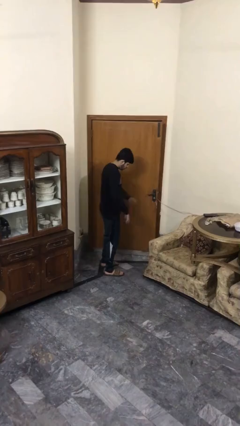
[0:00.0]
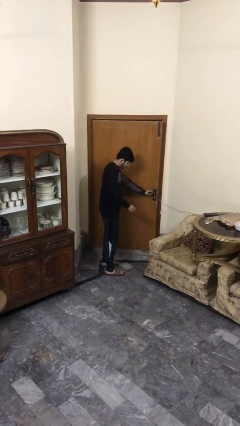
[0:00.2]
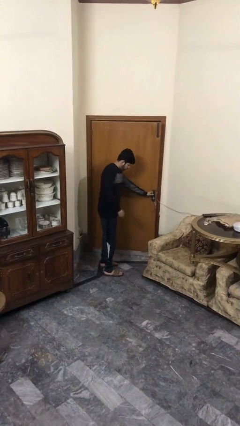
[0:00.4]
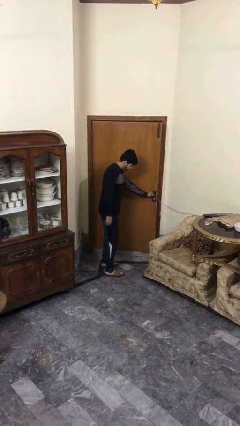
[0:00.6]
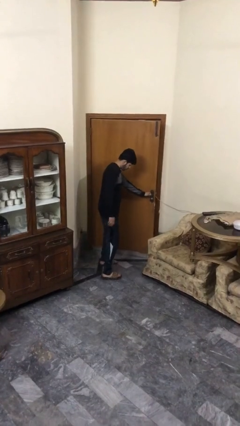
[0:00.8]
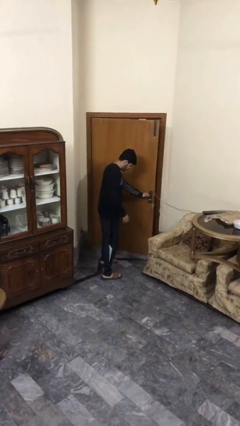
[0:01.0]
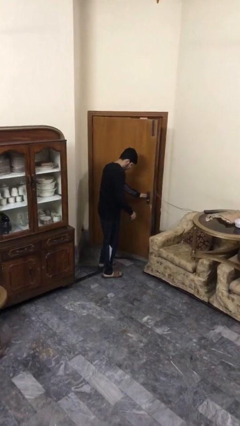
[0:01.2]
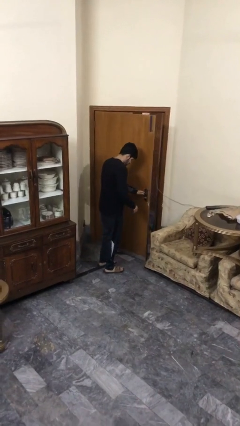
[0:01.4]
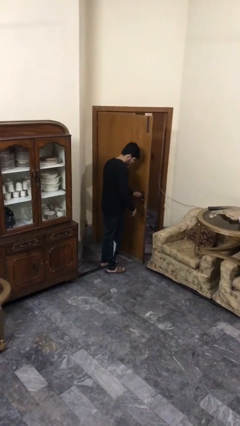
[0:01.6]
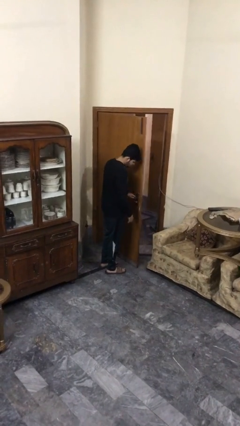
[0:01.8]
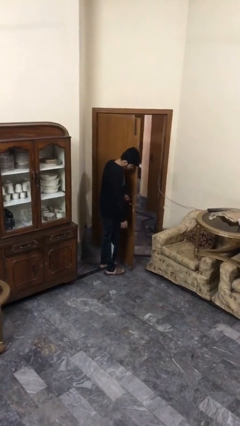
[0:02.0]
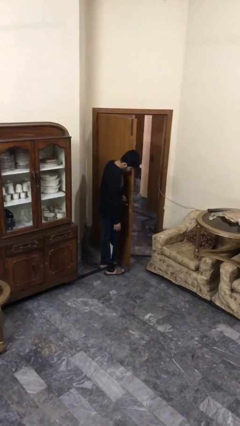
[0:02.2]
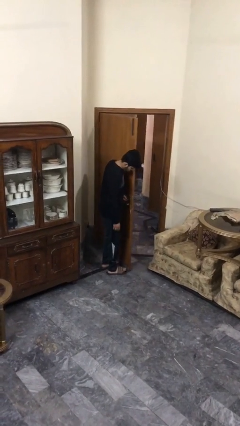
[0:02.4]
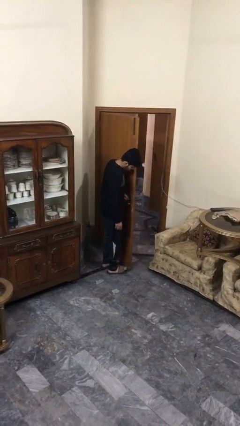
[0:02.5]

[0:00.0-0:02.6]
person opens facility door

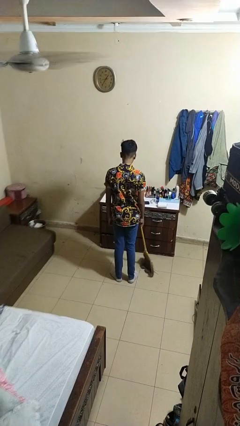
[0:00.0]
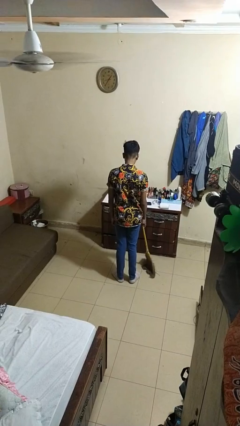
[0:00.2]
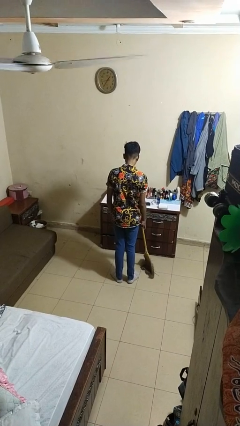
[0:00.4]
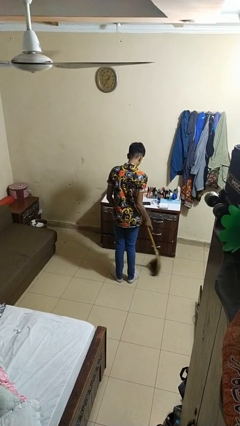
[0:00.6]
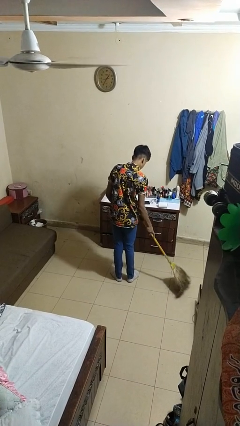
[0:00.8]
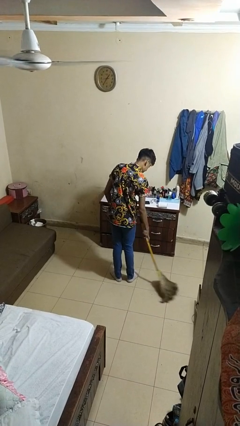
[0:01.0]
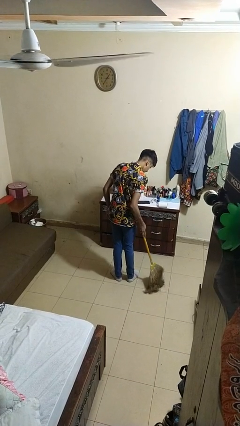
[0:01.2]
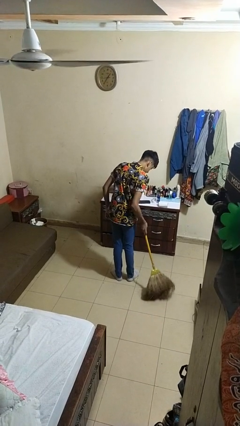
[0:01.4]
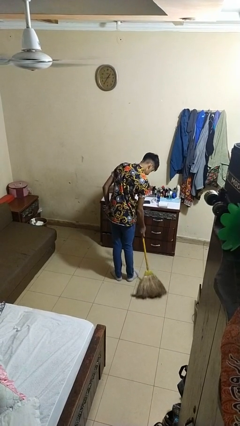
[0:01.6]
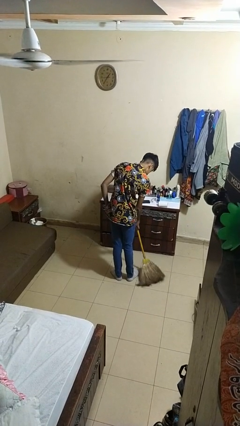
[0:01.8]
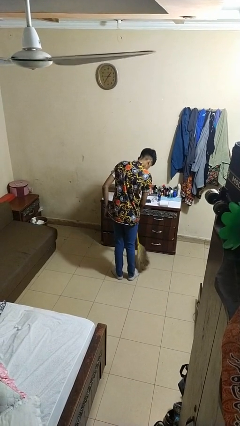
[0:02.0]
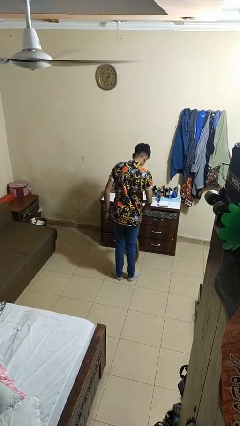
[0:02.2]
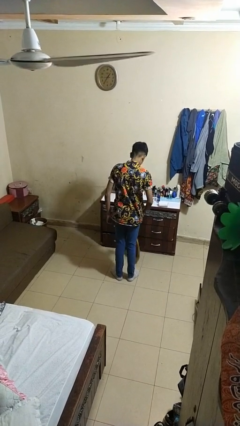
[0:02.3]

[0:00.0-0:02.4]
person sweeps floor

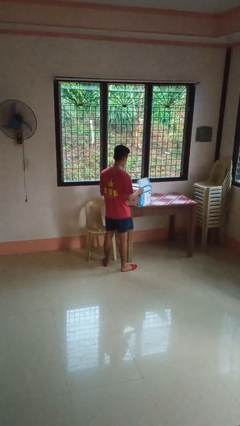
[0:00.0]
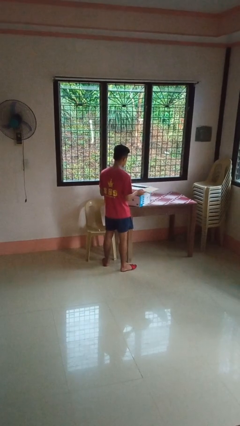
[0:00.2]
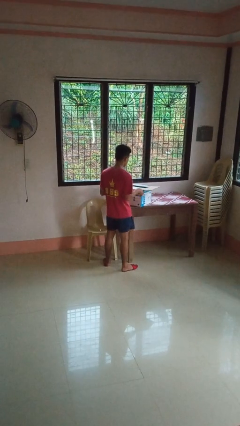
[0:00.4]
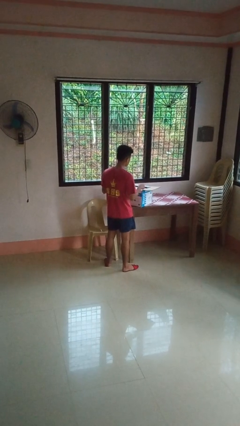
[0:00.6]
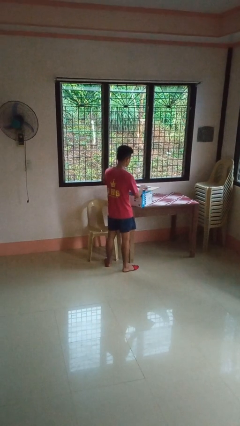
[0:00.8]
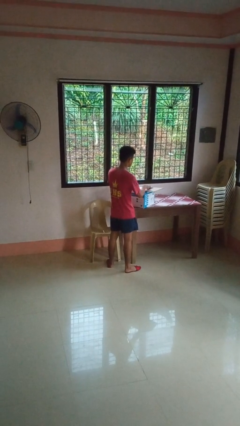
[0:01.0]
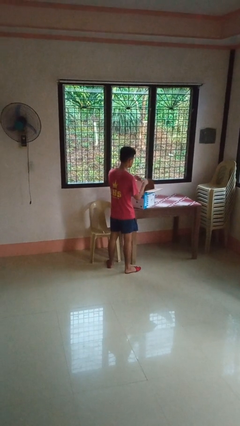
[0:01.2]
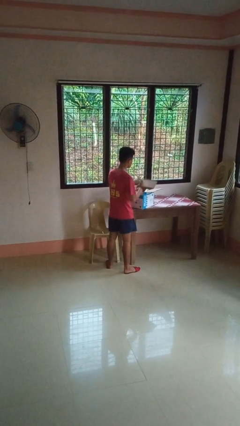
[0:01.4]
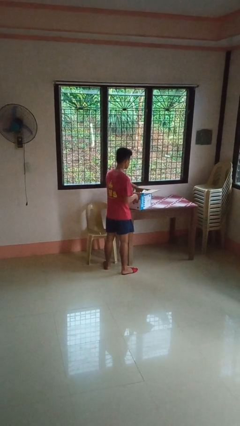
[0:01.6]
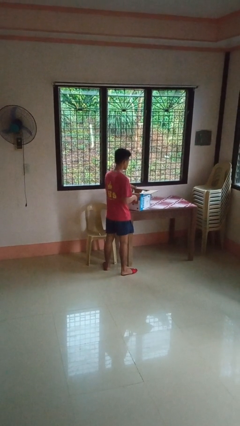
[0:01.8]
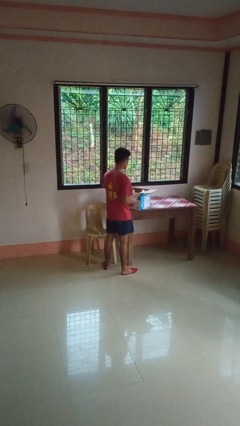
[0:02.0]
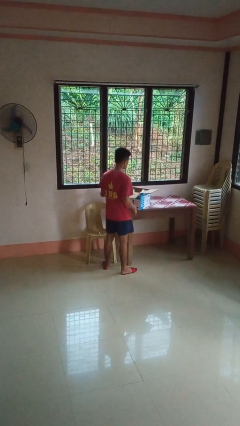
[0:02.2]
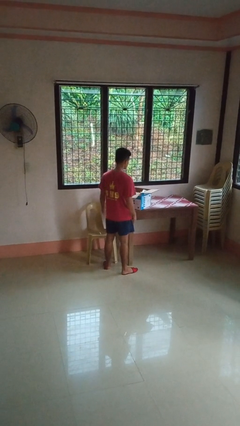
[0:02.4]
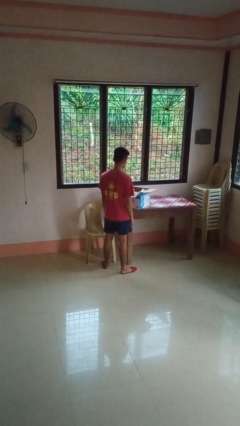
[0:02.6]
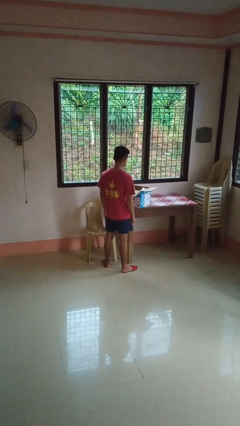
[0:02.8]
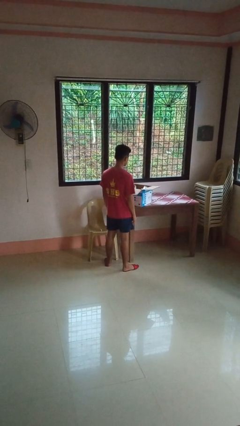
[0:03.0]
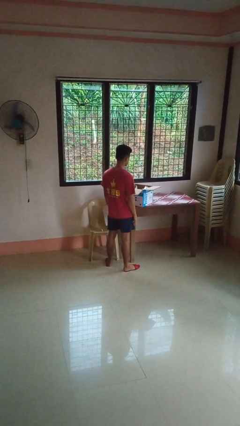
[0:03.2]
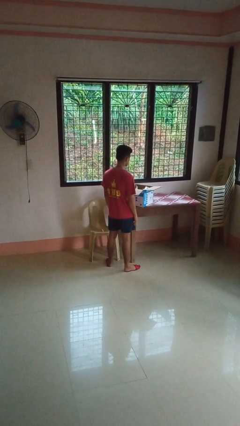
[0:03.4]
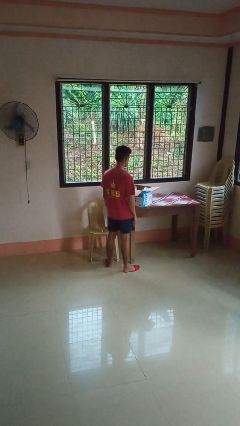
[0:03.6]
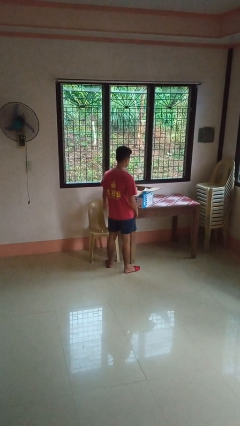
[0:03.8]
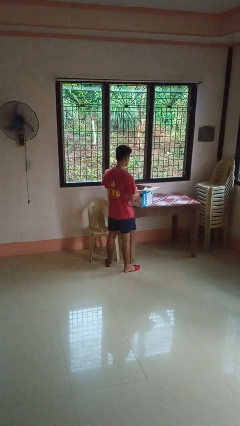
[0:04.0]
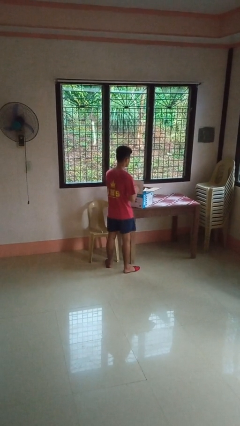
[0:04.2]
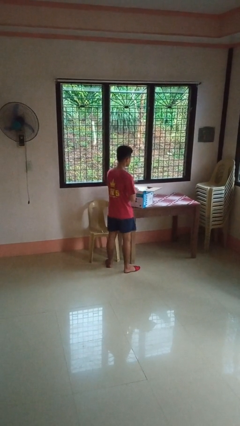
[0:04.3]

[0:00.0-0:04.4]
person opens box

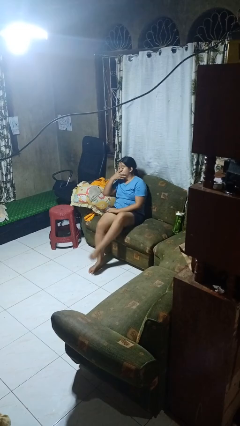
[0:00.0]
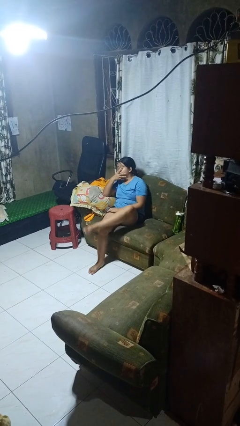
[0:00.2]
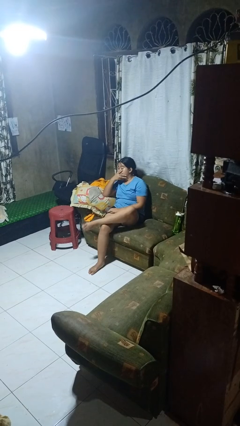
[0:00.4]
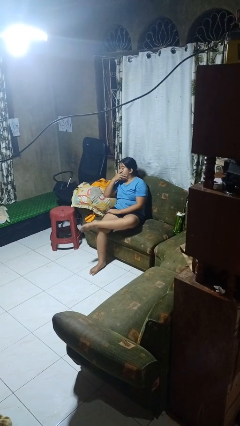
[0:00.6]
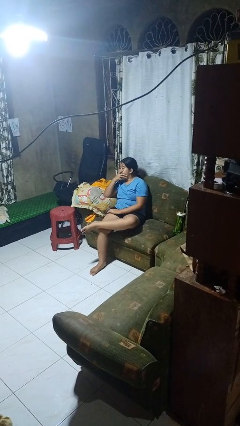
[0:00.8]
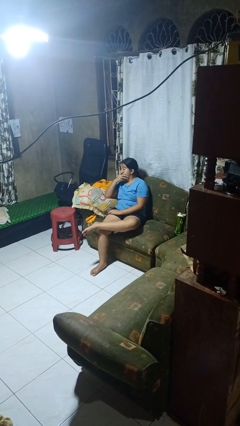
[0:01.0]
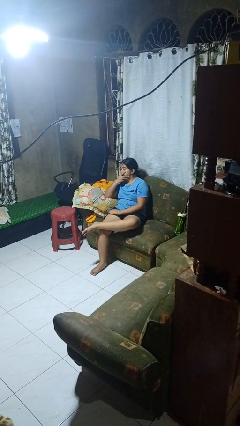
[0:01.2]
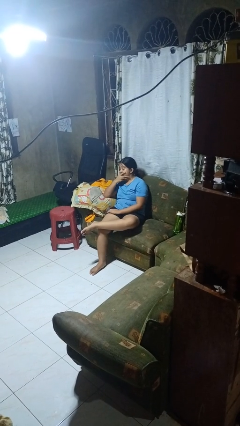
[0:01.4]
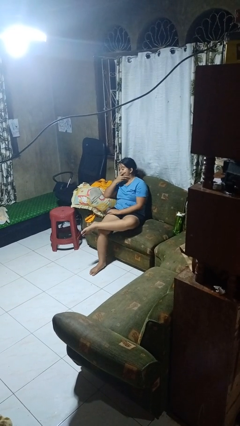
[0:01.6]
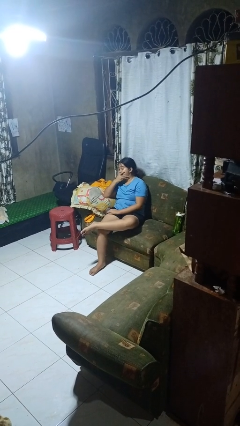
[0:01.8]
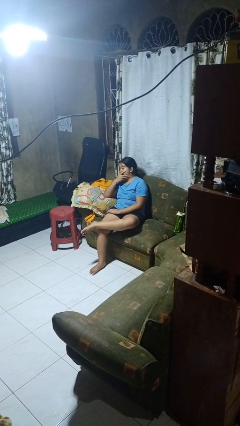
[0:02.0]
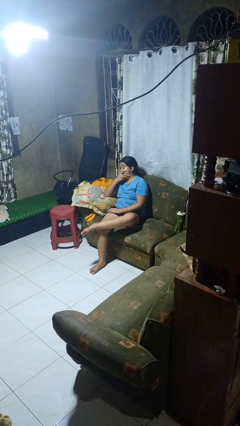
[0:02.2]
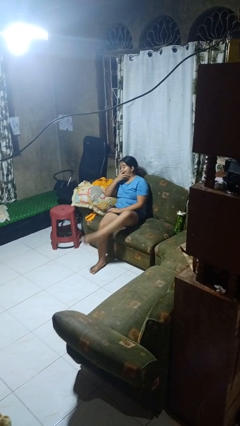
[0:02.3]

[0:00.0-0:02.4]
person crosses legs

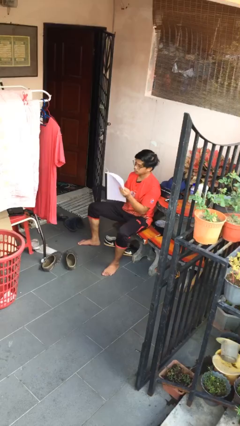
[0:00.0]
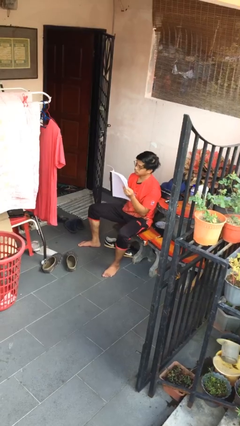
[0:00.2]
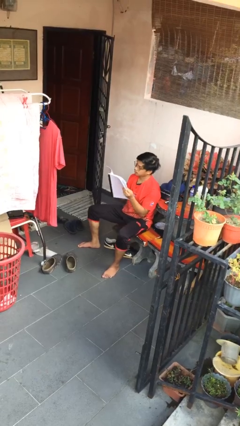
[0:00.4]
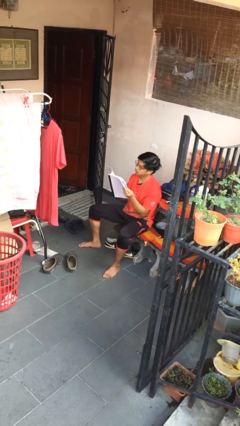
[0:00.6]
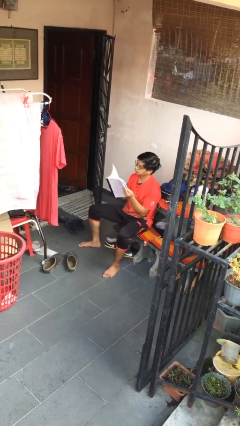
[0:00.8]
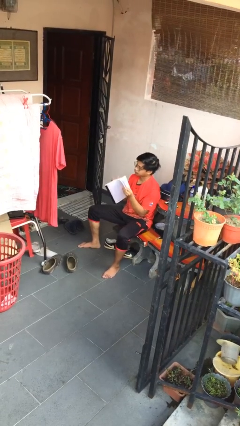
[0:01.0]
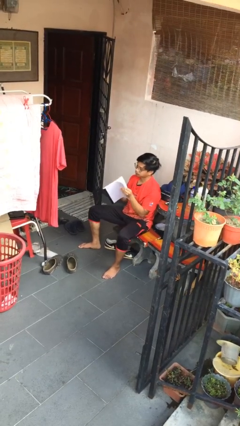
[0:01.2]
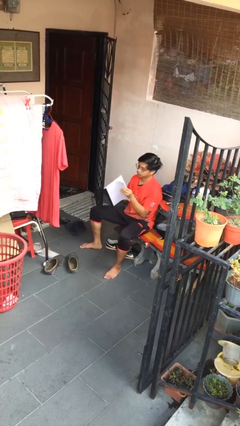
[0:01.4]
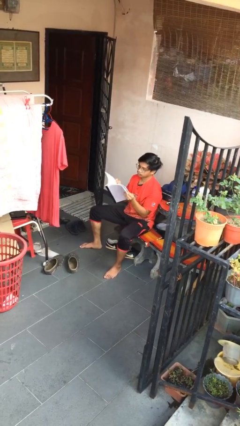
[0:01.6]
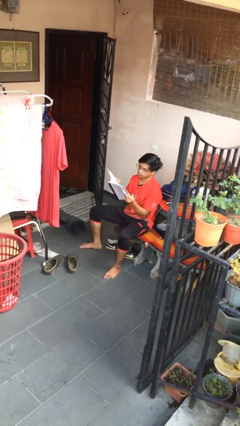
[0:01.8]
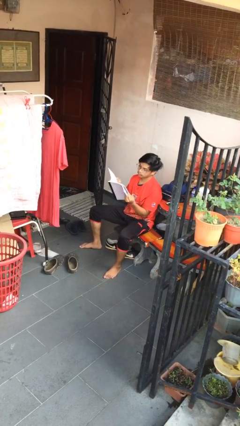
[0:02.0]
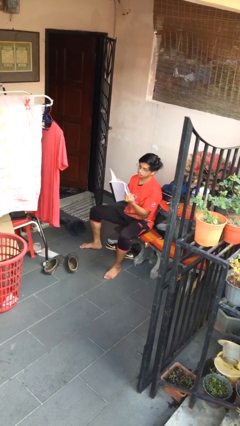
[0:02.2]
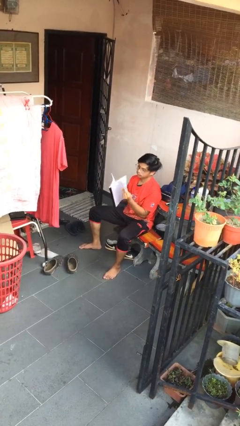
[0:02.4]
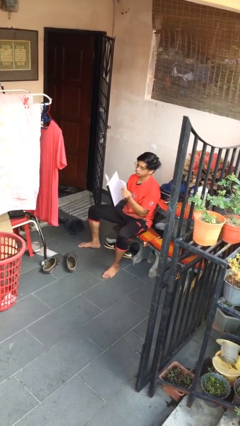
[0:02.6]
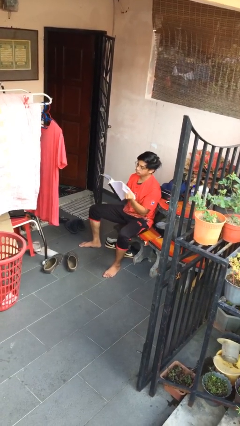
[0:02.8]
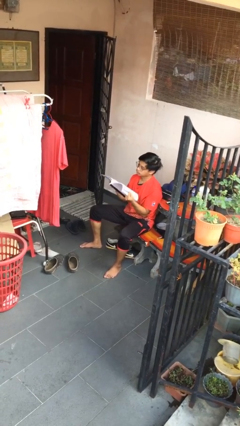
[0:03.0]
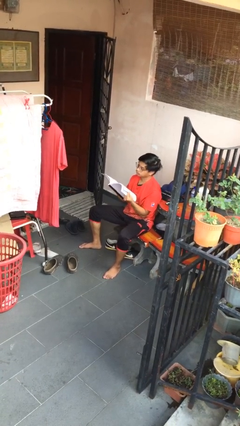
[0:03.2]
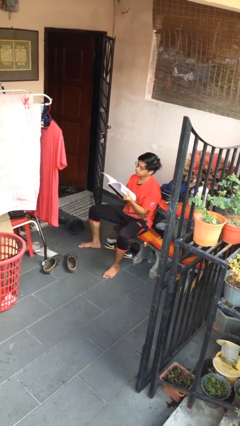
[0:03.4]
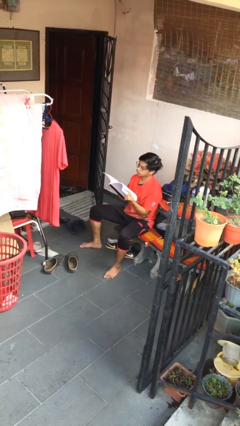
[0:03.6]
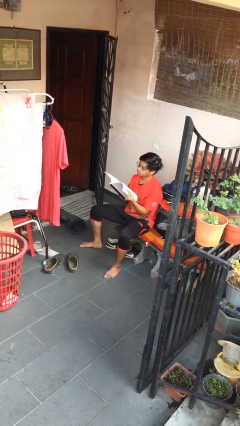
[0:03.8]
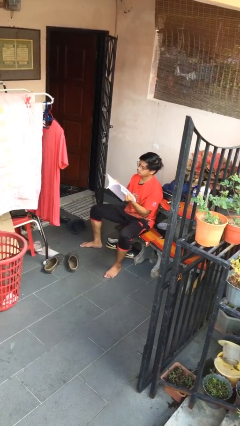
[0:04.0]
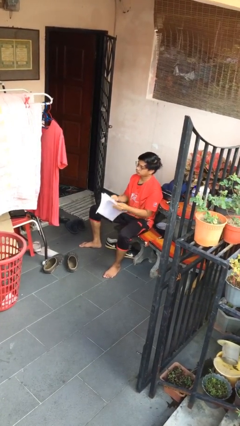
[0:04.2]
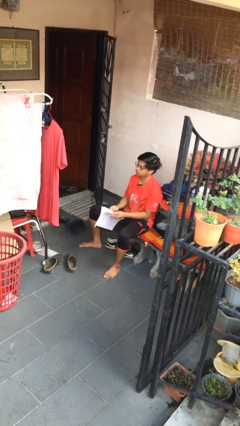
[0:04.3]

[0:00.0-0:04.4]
person reads document

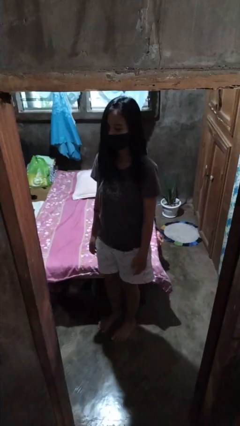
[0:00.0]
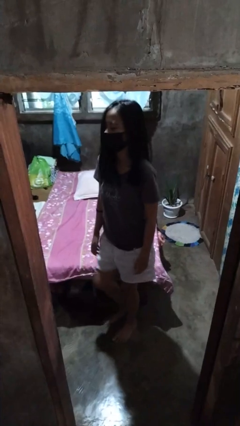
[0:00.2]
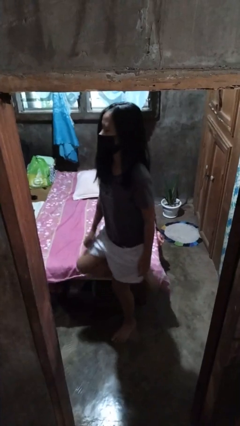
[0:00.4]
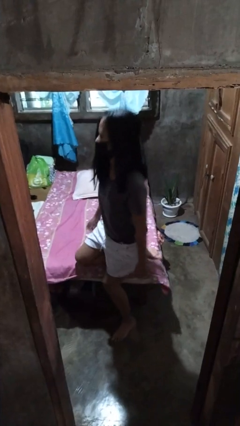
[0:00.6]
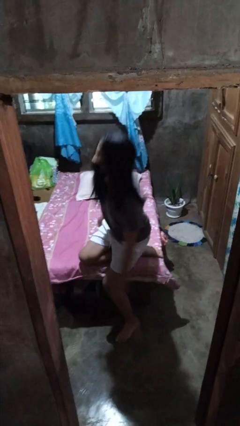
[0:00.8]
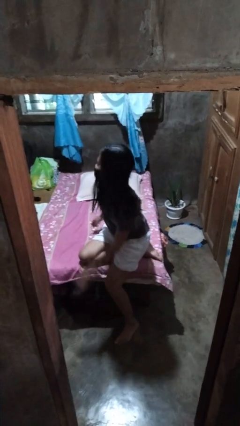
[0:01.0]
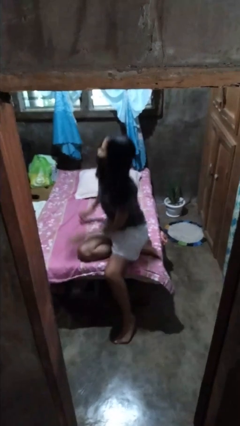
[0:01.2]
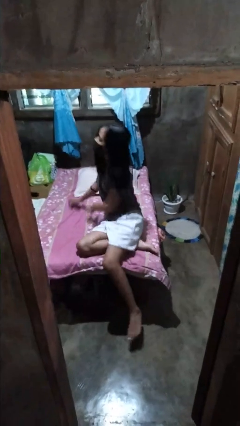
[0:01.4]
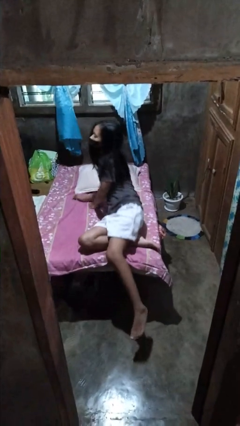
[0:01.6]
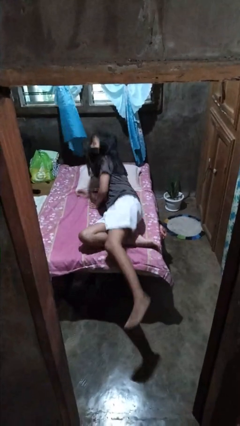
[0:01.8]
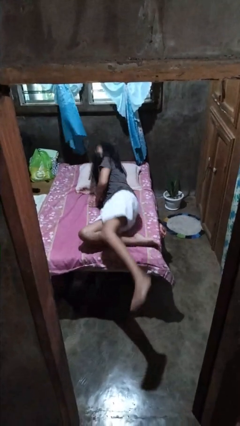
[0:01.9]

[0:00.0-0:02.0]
person lies down on bed
